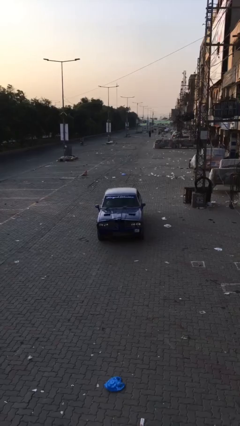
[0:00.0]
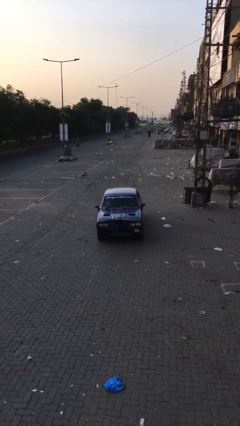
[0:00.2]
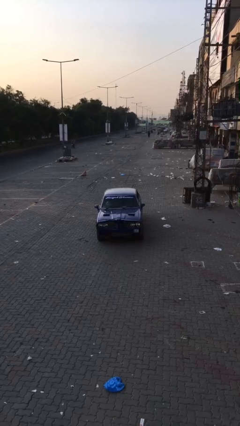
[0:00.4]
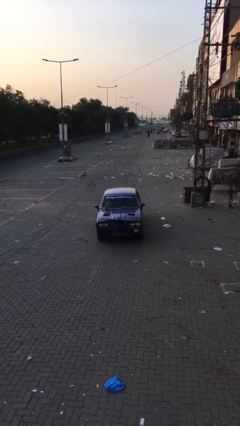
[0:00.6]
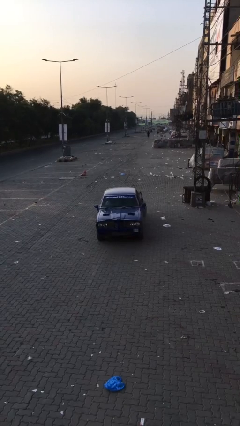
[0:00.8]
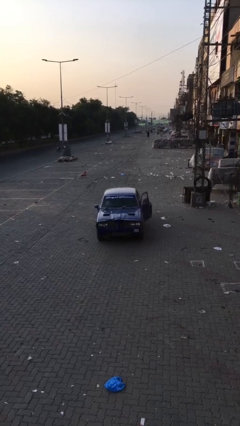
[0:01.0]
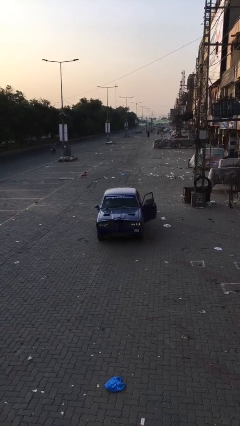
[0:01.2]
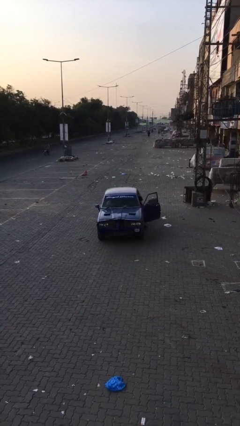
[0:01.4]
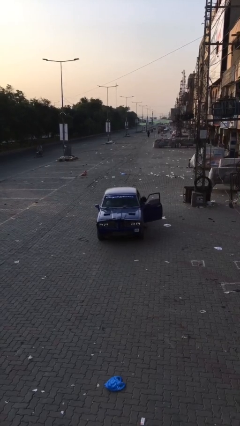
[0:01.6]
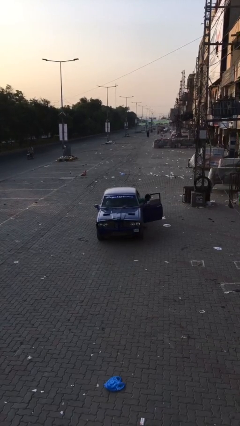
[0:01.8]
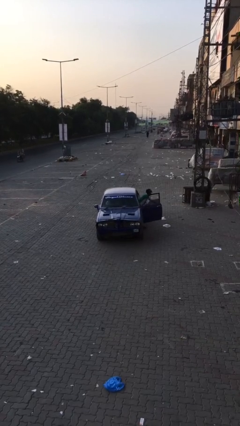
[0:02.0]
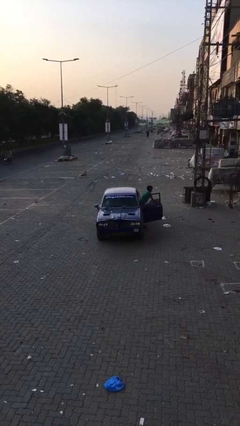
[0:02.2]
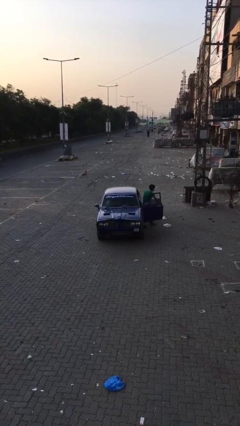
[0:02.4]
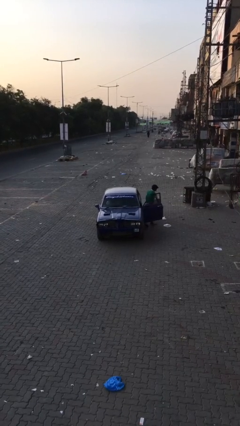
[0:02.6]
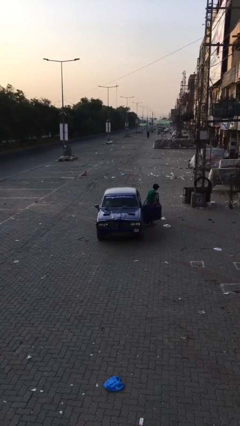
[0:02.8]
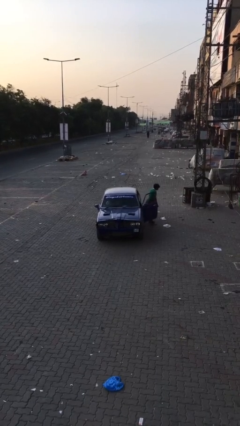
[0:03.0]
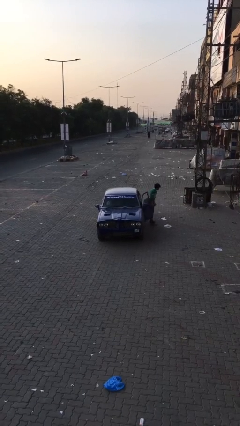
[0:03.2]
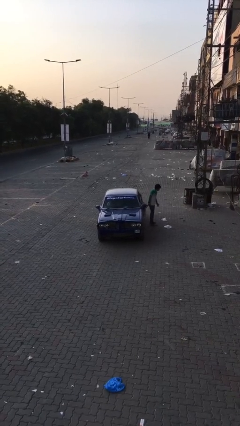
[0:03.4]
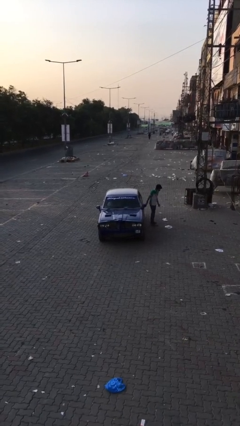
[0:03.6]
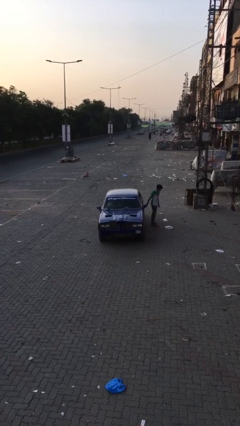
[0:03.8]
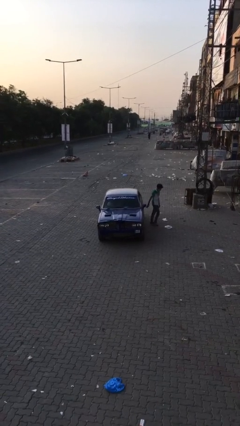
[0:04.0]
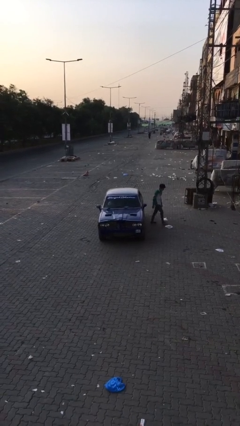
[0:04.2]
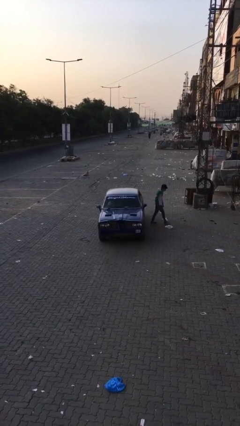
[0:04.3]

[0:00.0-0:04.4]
car drops off person

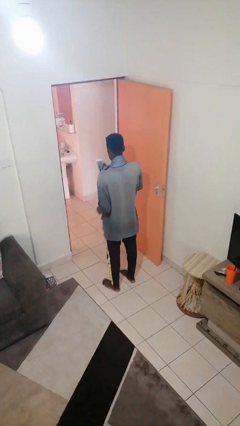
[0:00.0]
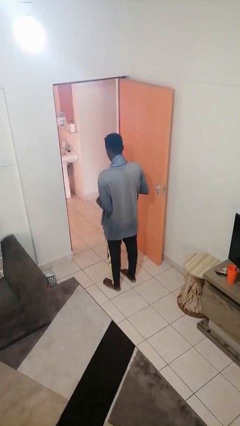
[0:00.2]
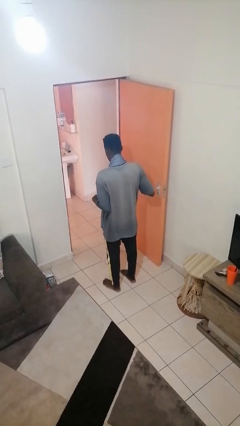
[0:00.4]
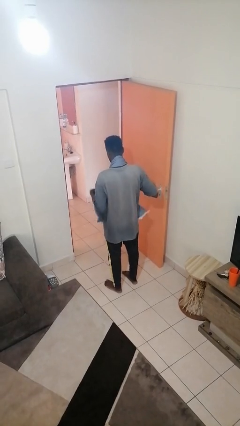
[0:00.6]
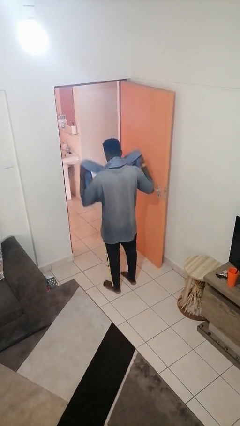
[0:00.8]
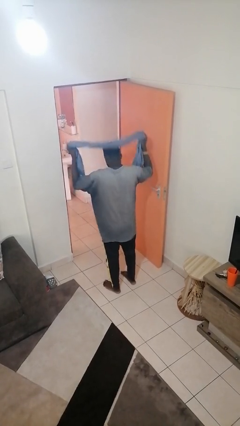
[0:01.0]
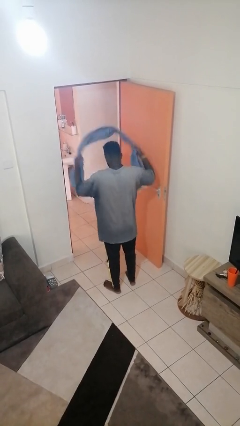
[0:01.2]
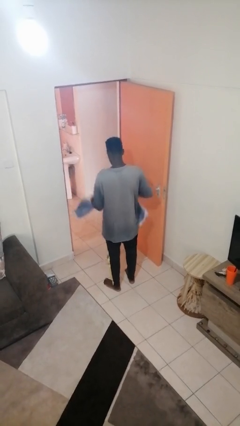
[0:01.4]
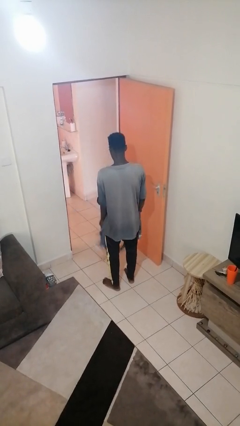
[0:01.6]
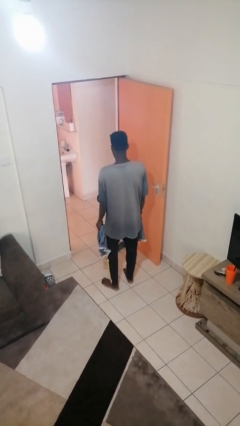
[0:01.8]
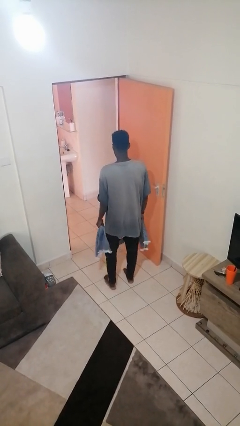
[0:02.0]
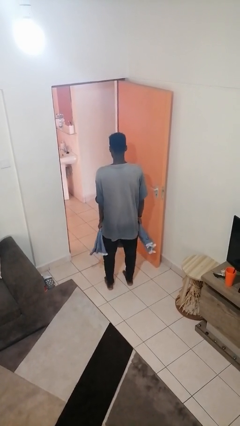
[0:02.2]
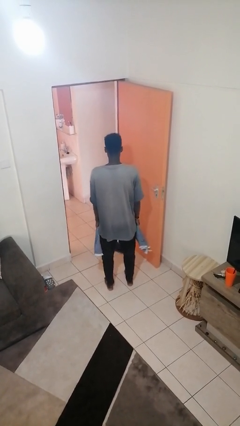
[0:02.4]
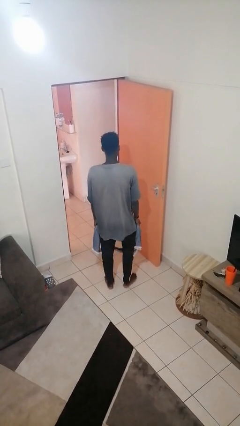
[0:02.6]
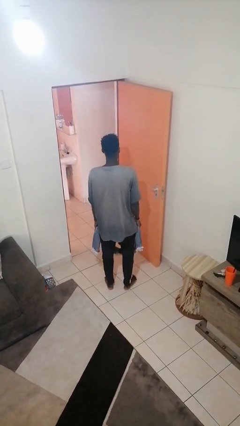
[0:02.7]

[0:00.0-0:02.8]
person takes off scarf

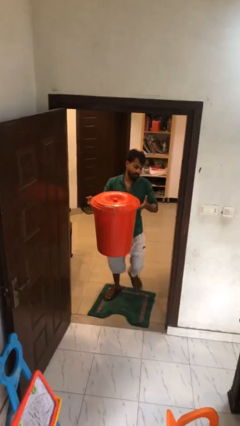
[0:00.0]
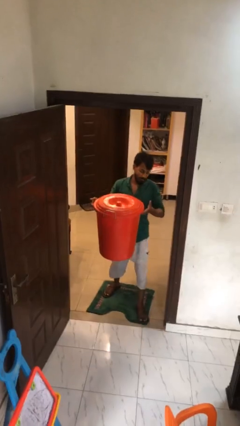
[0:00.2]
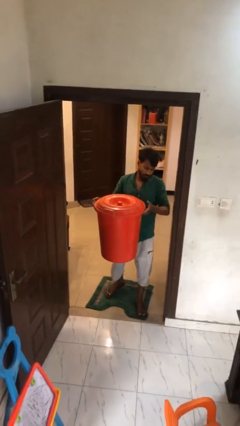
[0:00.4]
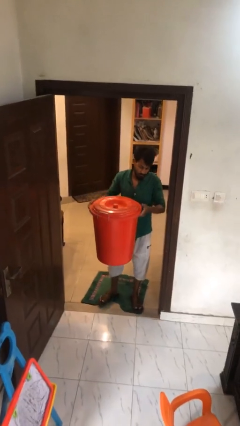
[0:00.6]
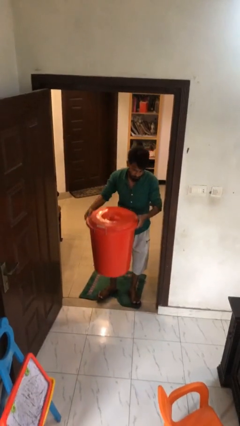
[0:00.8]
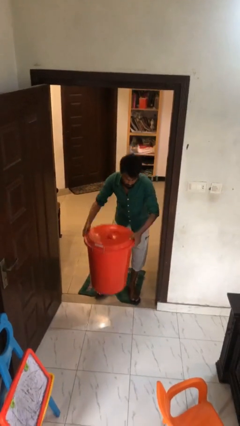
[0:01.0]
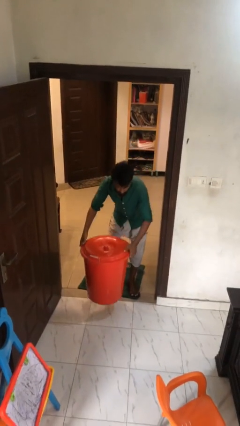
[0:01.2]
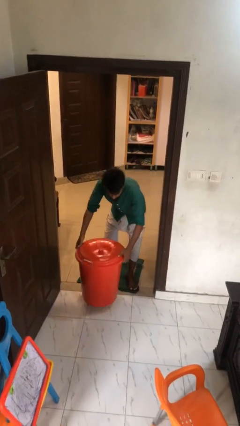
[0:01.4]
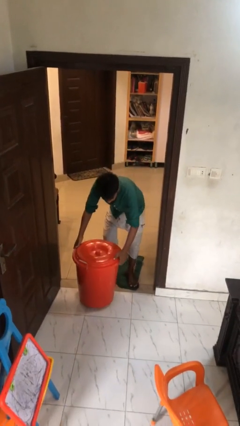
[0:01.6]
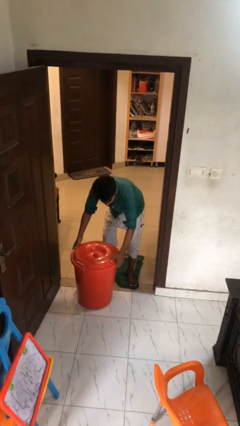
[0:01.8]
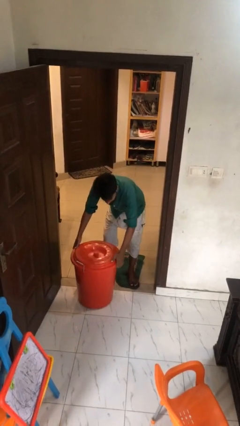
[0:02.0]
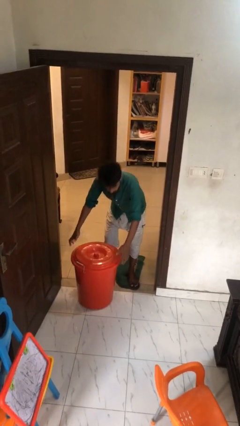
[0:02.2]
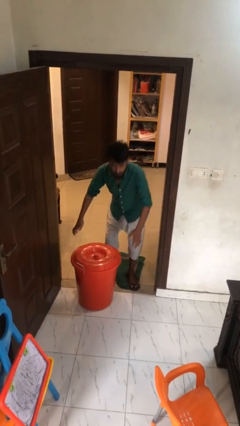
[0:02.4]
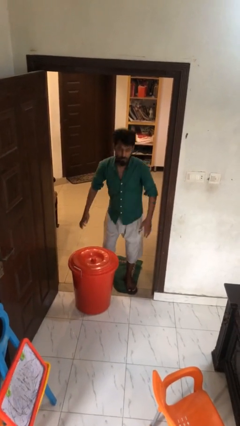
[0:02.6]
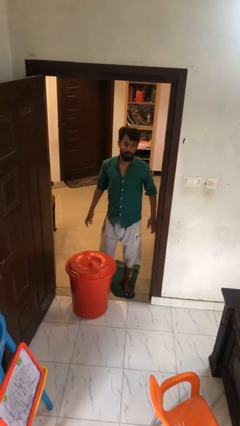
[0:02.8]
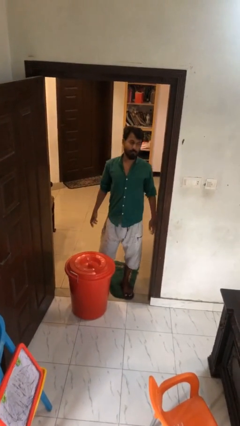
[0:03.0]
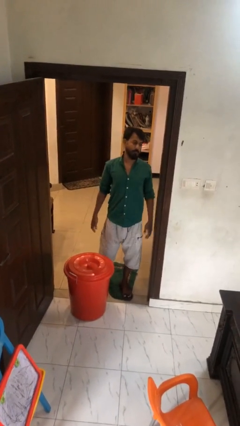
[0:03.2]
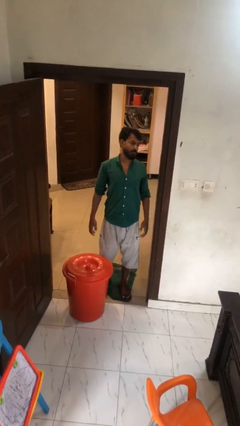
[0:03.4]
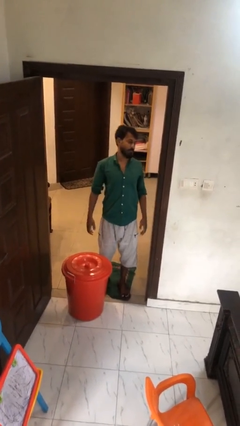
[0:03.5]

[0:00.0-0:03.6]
person puts down object on floor

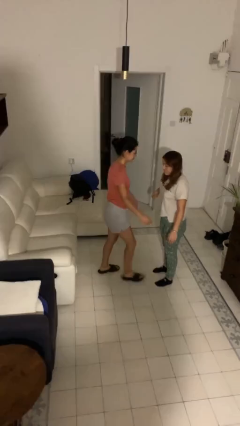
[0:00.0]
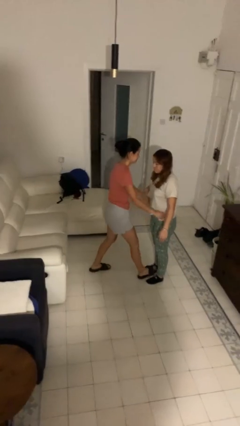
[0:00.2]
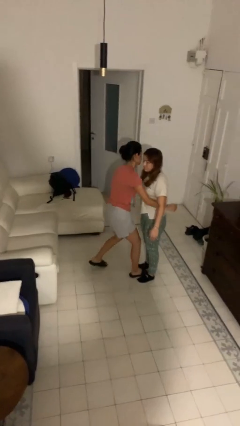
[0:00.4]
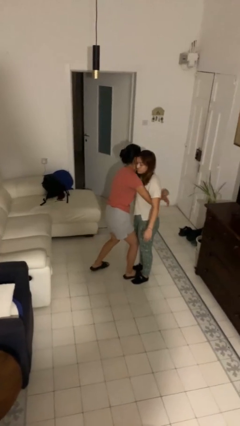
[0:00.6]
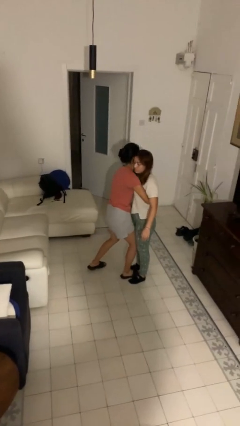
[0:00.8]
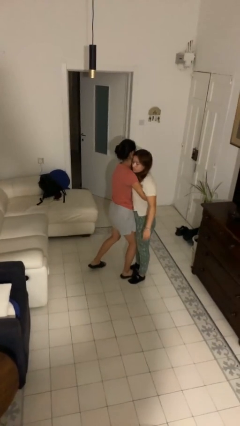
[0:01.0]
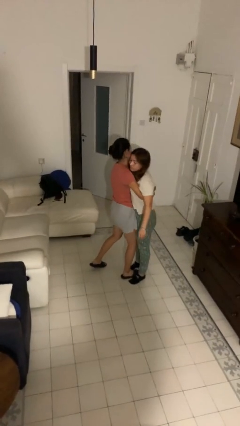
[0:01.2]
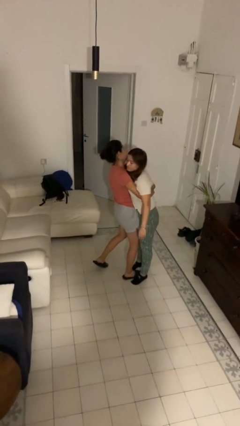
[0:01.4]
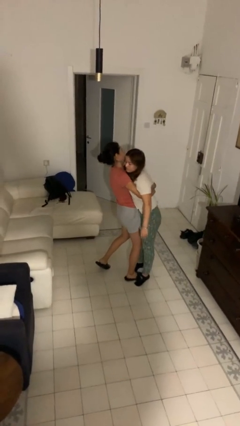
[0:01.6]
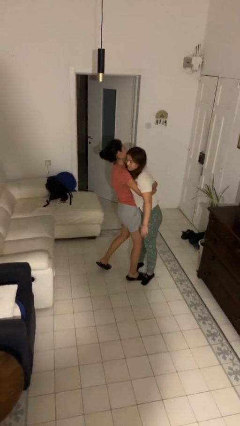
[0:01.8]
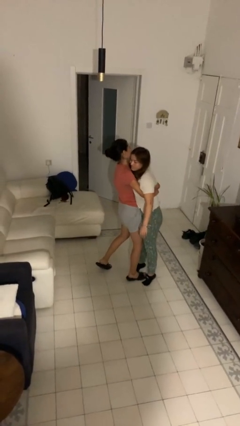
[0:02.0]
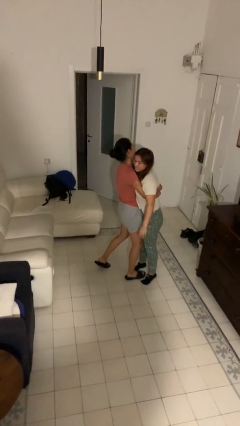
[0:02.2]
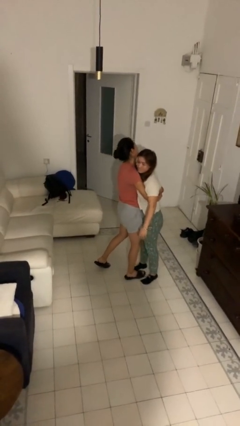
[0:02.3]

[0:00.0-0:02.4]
person picks up person

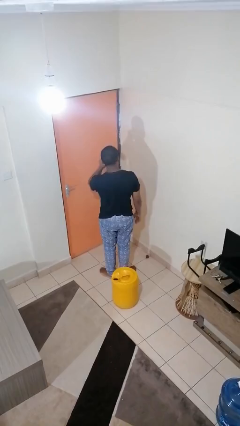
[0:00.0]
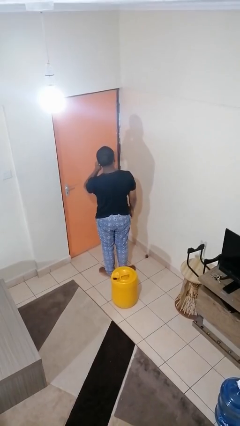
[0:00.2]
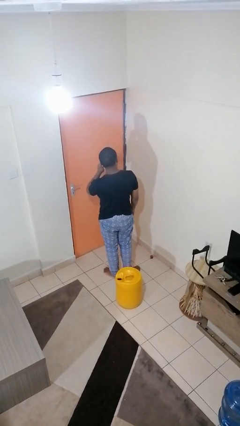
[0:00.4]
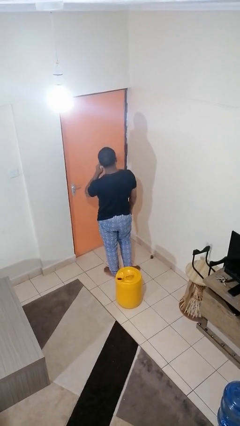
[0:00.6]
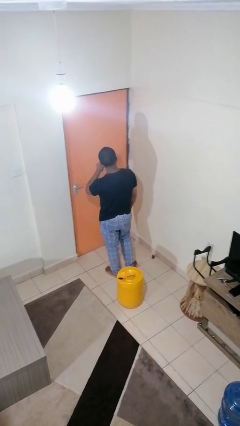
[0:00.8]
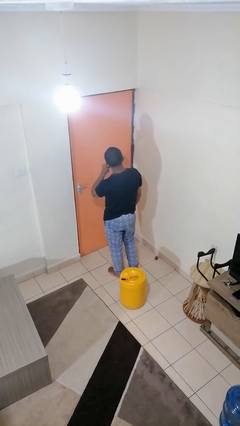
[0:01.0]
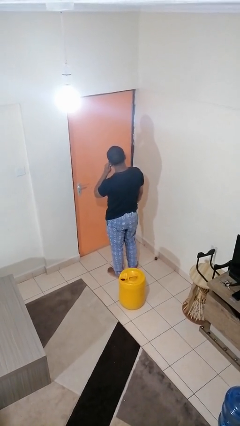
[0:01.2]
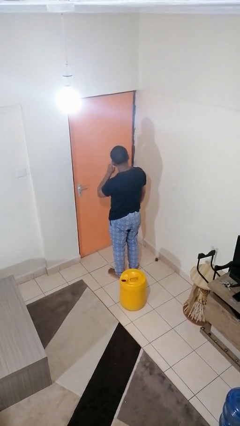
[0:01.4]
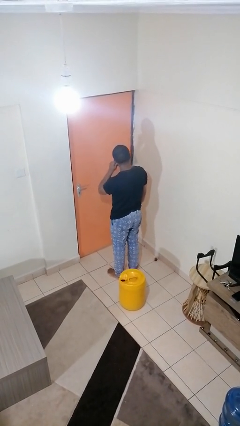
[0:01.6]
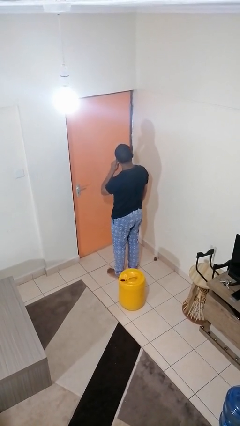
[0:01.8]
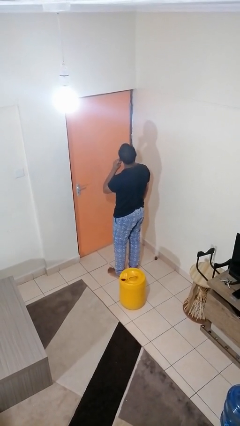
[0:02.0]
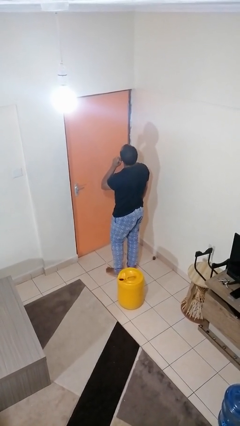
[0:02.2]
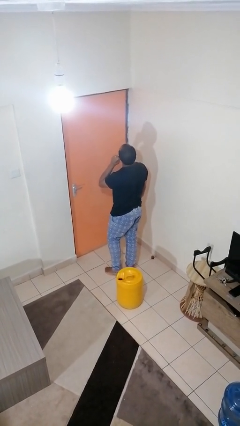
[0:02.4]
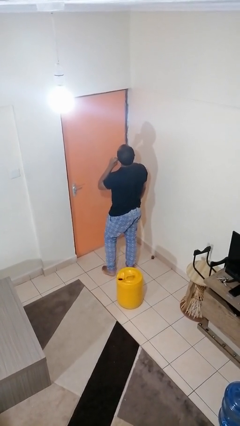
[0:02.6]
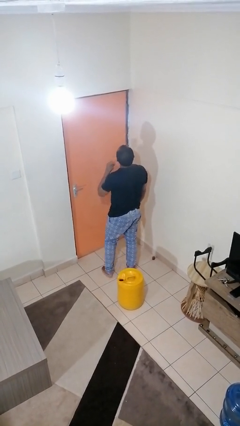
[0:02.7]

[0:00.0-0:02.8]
person touches earlobe

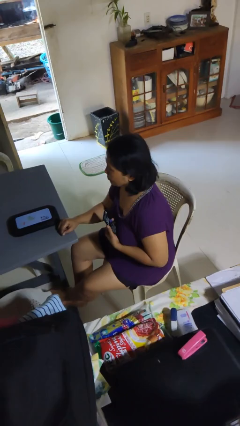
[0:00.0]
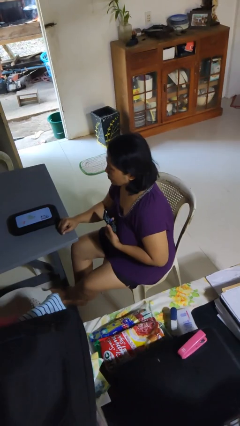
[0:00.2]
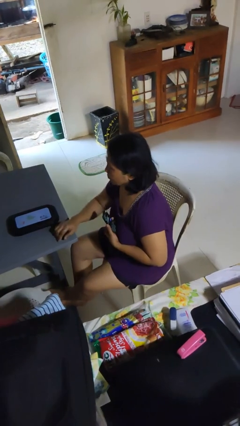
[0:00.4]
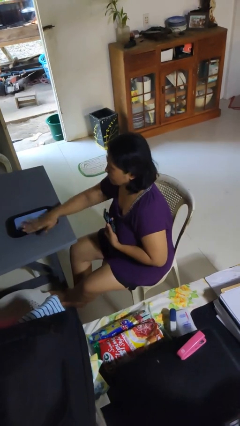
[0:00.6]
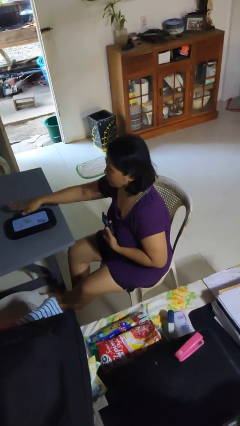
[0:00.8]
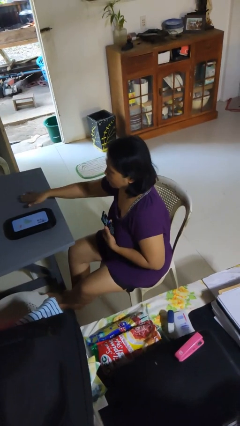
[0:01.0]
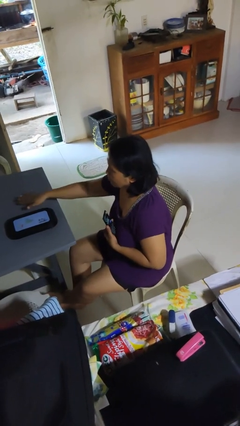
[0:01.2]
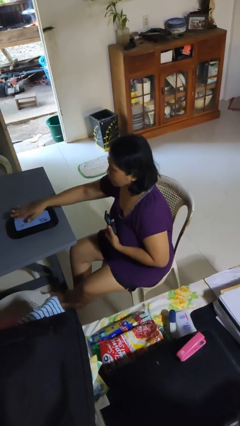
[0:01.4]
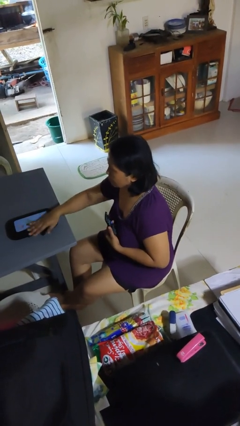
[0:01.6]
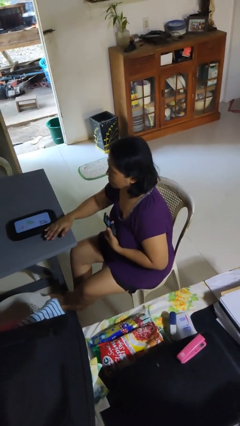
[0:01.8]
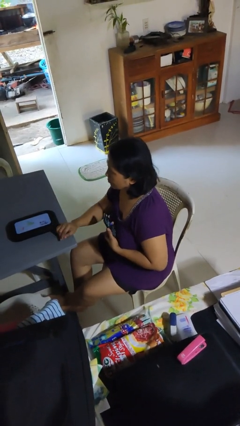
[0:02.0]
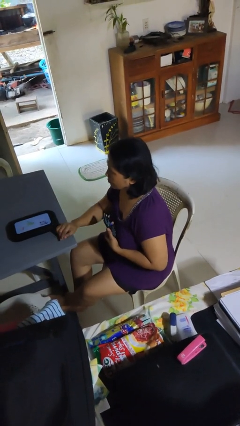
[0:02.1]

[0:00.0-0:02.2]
person waves hand over object
